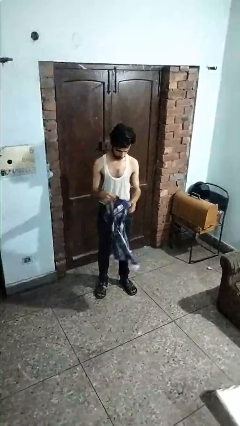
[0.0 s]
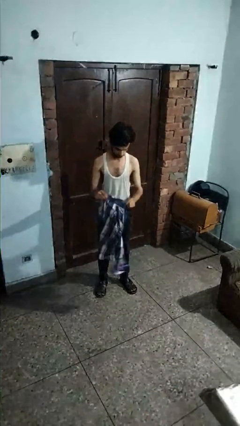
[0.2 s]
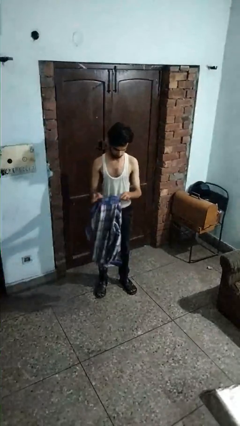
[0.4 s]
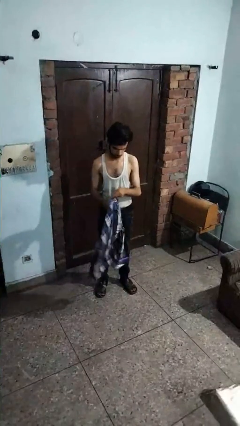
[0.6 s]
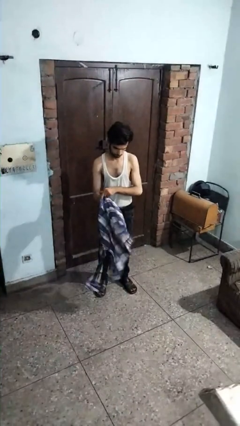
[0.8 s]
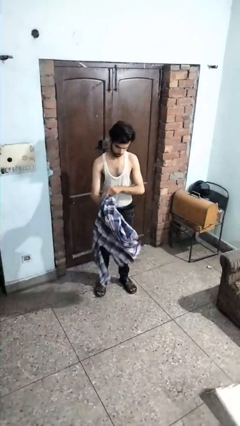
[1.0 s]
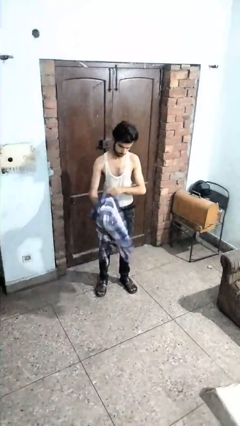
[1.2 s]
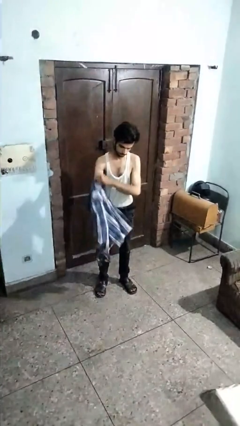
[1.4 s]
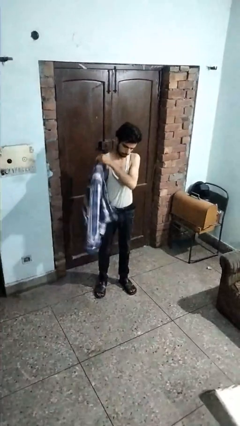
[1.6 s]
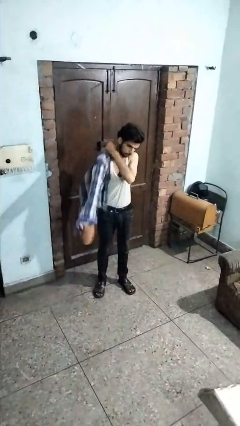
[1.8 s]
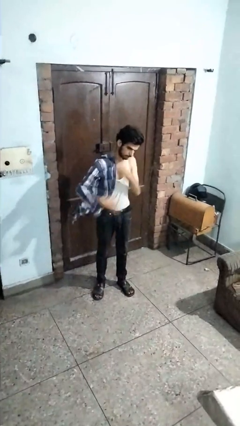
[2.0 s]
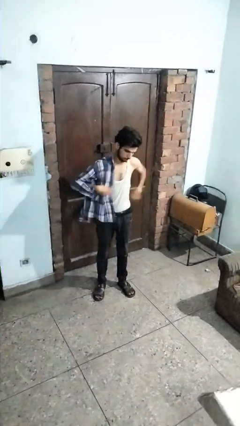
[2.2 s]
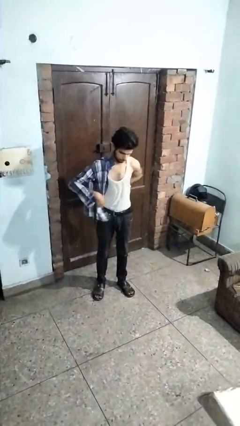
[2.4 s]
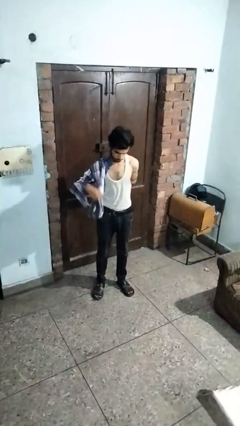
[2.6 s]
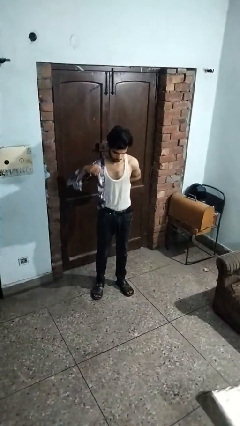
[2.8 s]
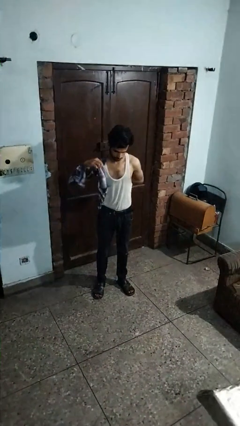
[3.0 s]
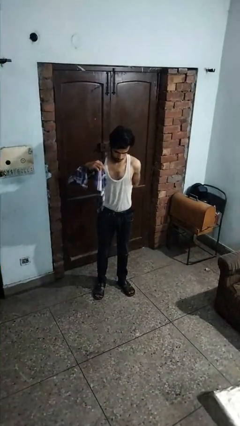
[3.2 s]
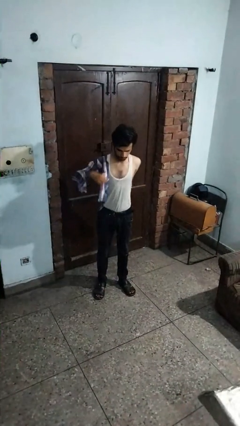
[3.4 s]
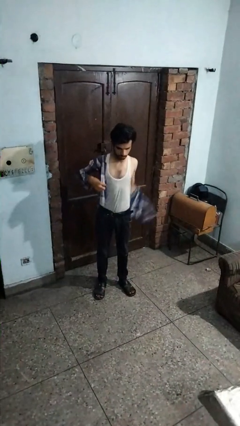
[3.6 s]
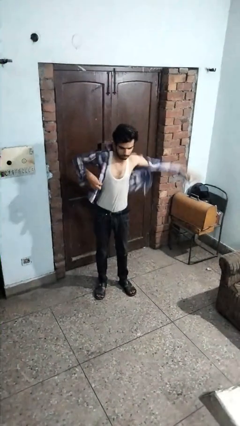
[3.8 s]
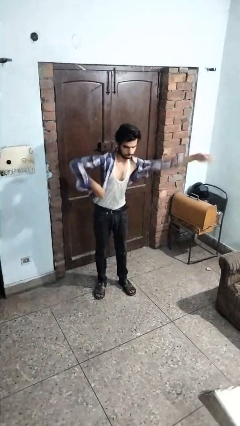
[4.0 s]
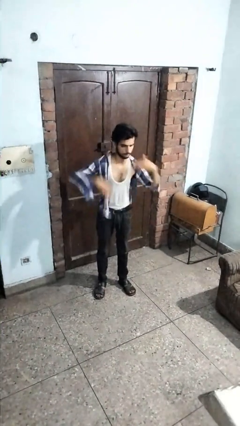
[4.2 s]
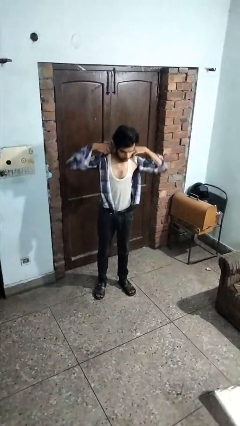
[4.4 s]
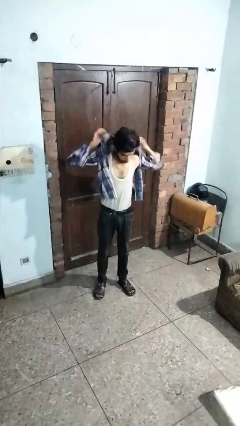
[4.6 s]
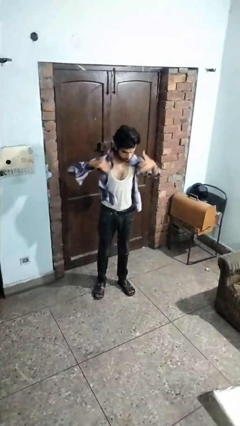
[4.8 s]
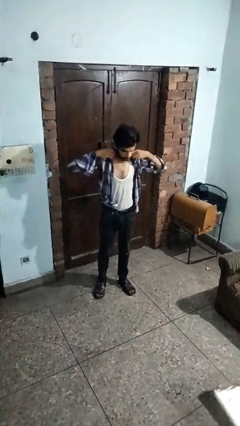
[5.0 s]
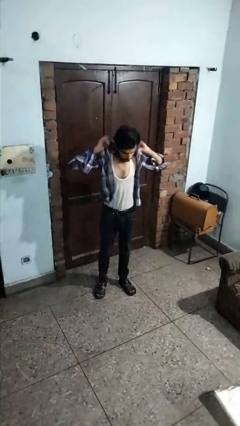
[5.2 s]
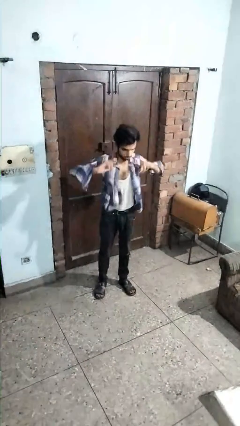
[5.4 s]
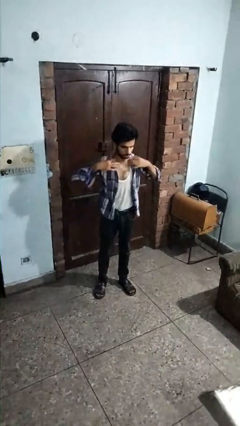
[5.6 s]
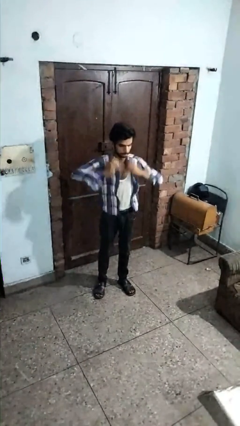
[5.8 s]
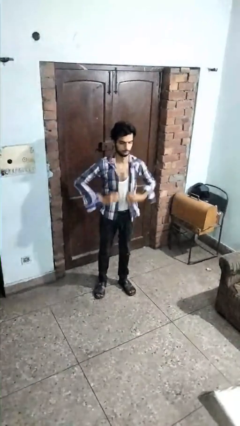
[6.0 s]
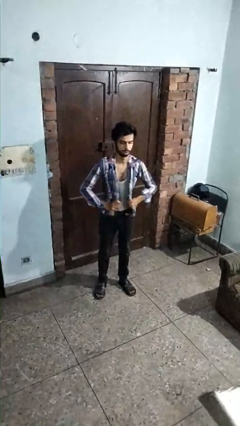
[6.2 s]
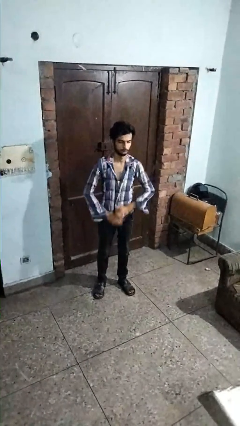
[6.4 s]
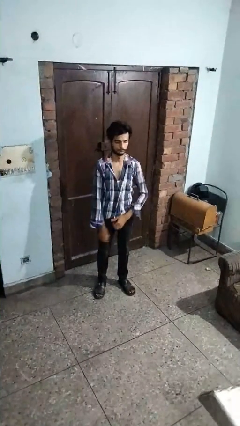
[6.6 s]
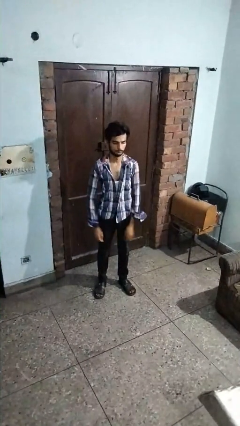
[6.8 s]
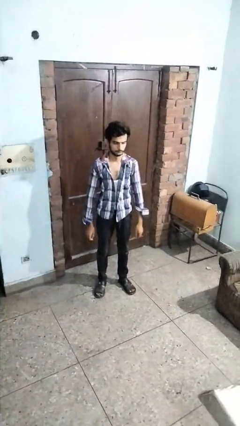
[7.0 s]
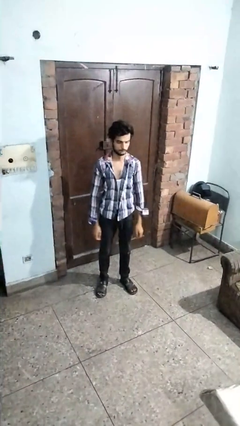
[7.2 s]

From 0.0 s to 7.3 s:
person puts on shirt

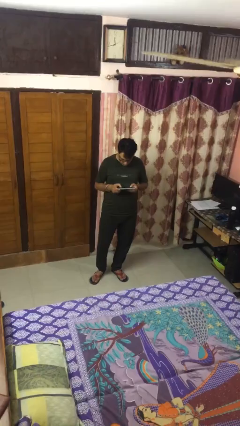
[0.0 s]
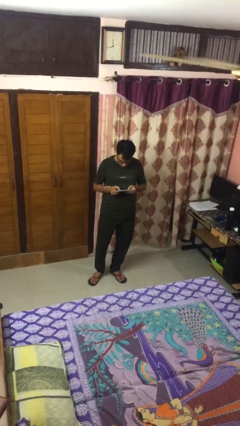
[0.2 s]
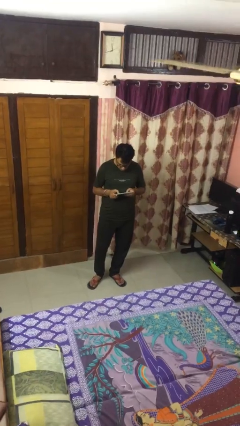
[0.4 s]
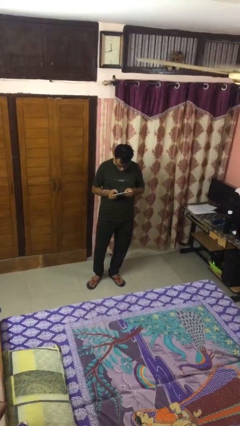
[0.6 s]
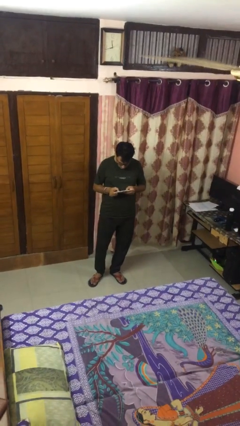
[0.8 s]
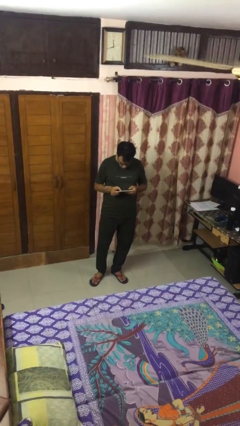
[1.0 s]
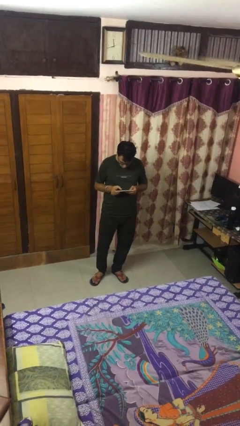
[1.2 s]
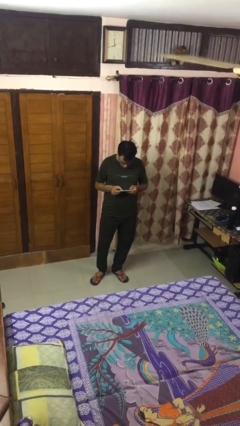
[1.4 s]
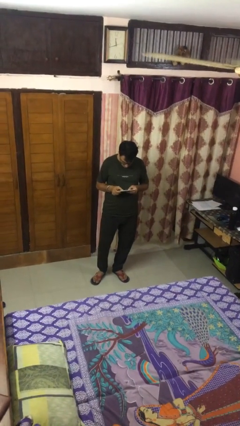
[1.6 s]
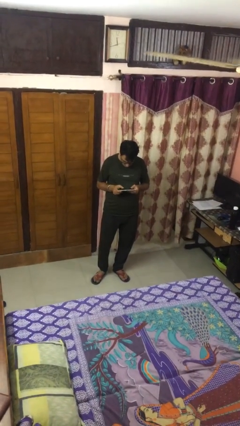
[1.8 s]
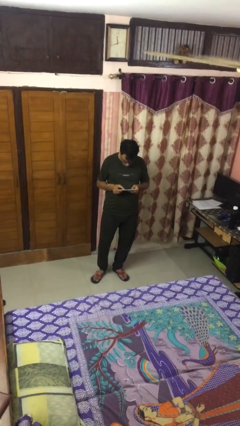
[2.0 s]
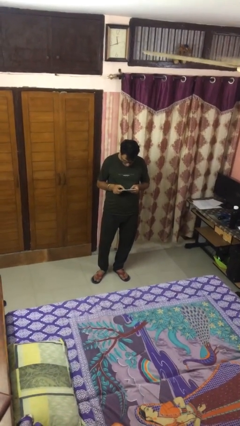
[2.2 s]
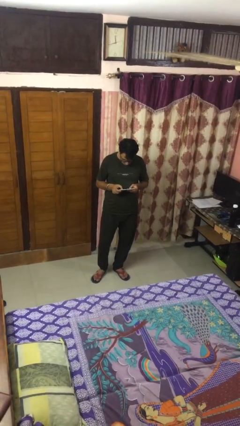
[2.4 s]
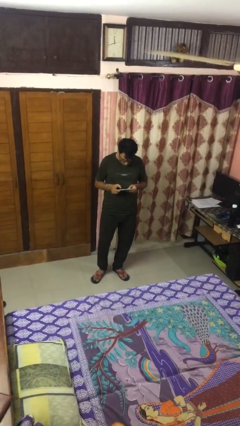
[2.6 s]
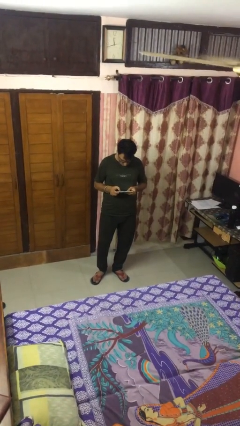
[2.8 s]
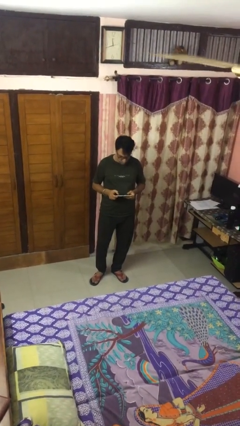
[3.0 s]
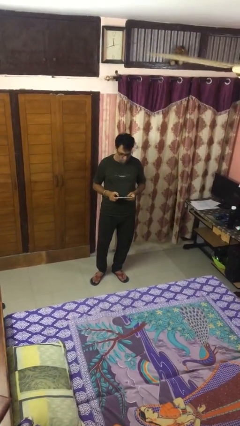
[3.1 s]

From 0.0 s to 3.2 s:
person interacts with handheld game

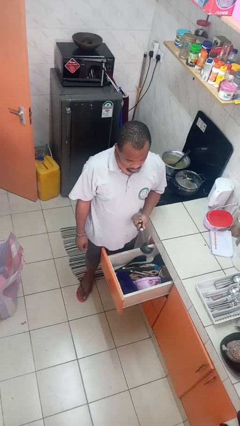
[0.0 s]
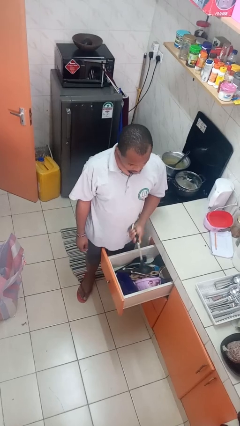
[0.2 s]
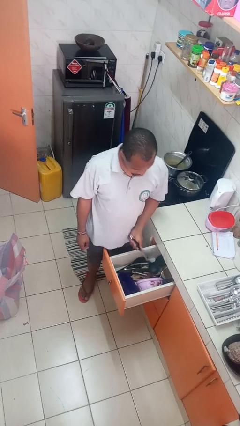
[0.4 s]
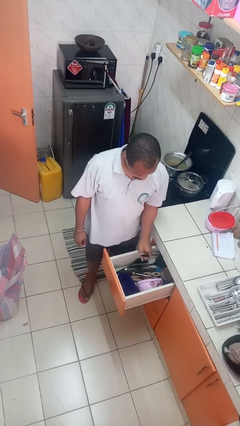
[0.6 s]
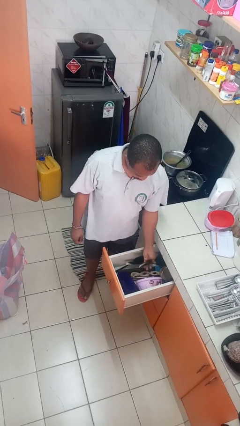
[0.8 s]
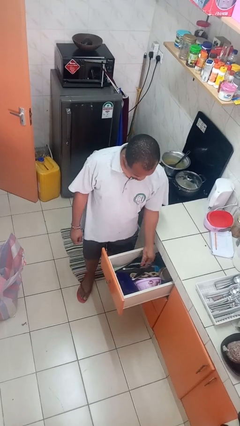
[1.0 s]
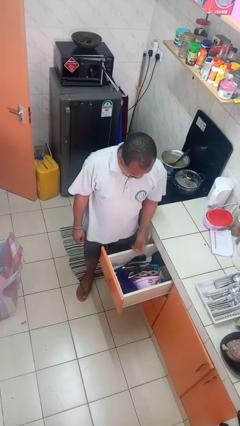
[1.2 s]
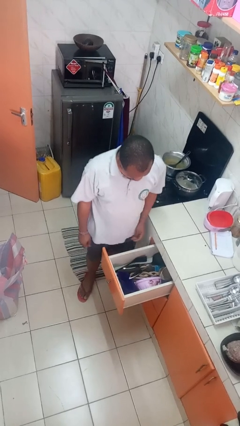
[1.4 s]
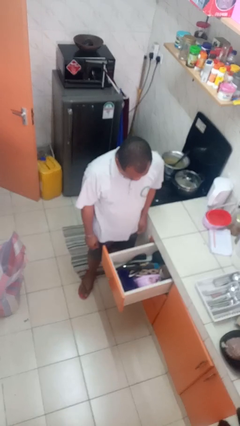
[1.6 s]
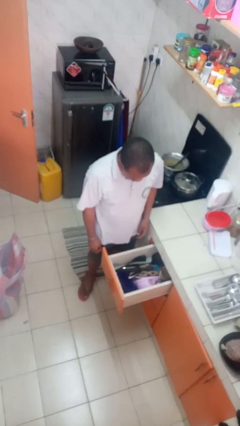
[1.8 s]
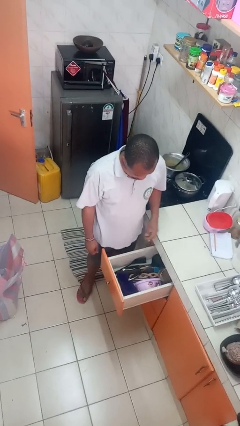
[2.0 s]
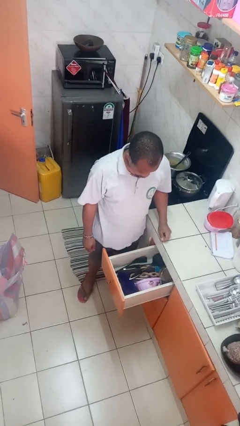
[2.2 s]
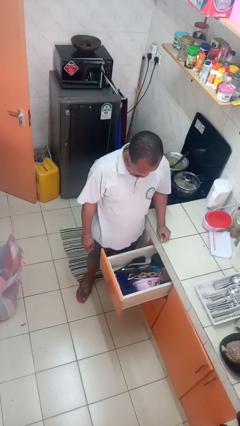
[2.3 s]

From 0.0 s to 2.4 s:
person puts object into kitchen drawer

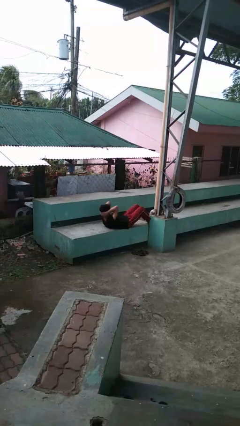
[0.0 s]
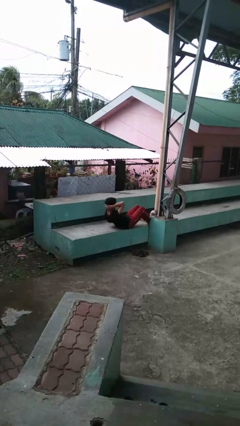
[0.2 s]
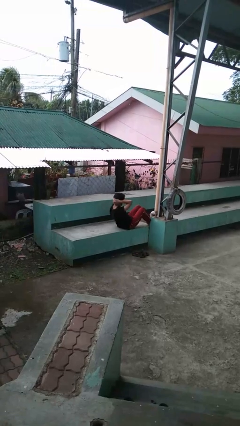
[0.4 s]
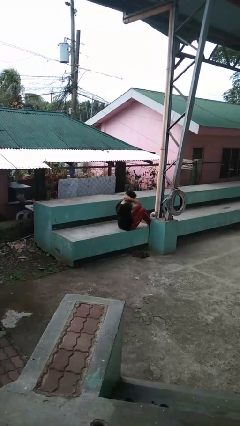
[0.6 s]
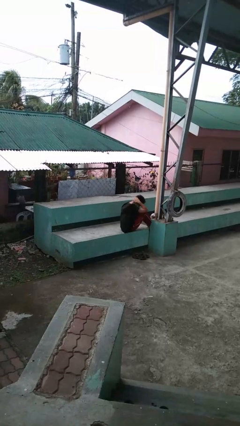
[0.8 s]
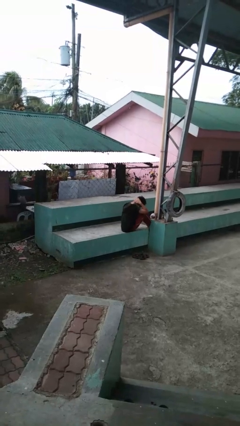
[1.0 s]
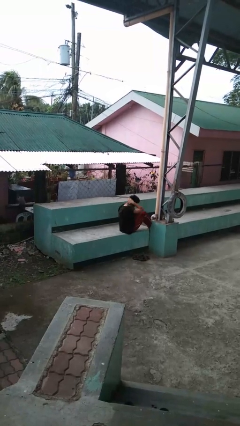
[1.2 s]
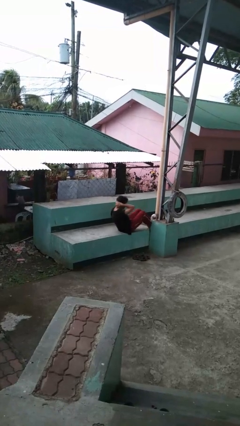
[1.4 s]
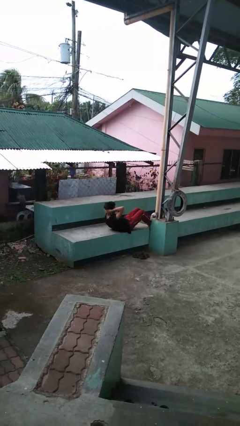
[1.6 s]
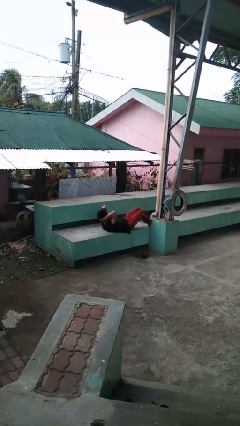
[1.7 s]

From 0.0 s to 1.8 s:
person exercises with situp

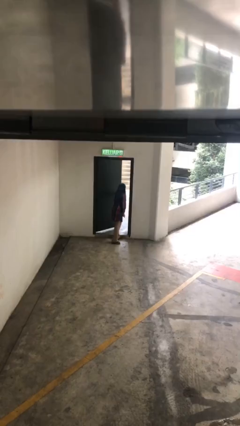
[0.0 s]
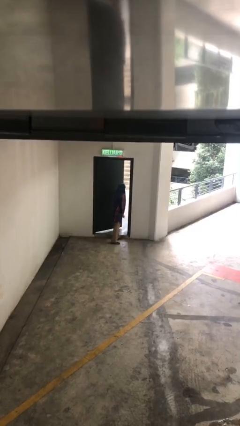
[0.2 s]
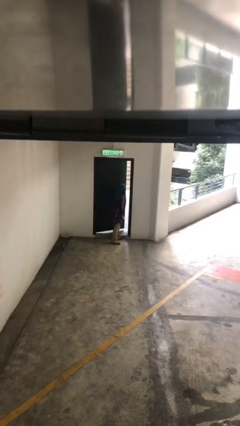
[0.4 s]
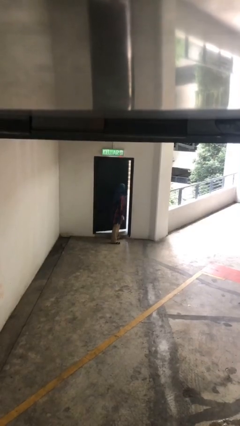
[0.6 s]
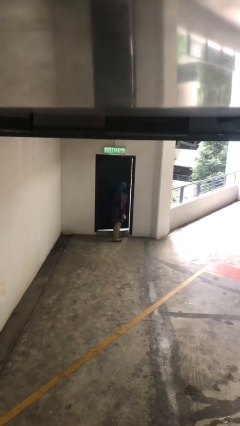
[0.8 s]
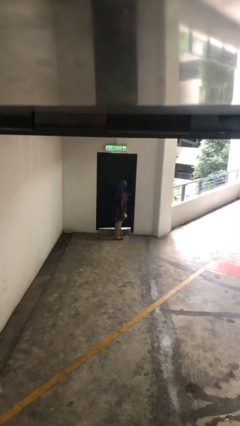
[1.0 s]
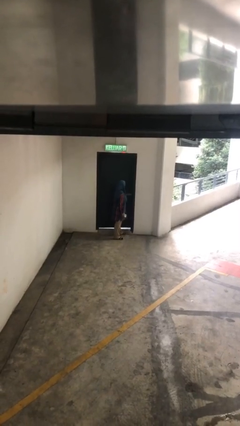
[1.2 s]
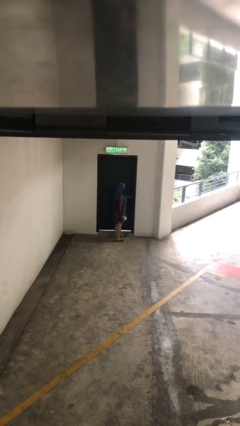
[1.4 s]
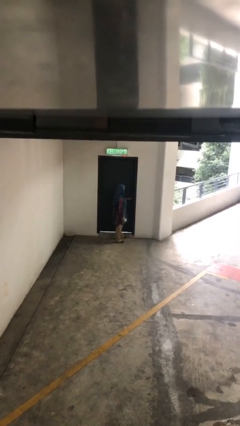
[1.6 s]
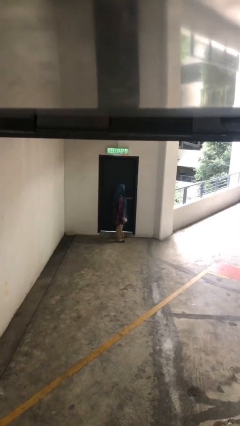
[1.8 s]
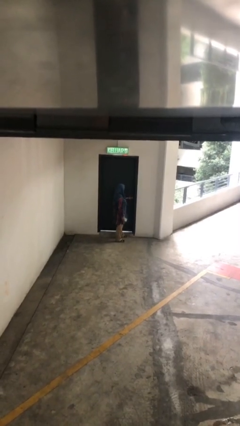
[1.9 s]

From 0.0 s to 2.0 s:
person closes facility door

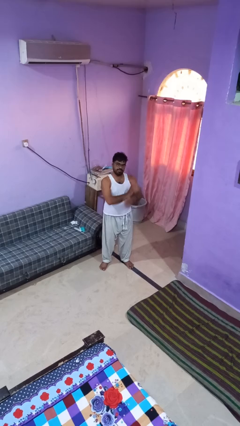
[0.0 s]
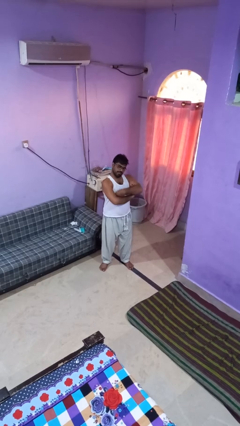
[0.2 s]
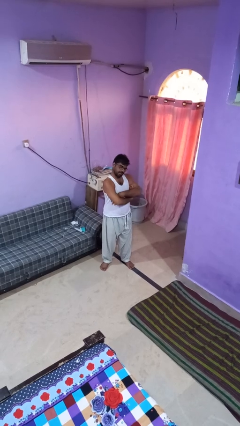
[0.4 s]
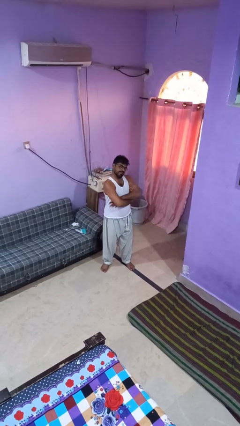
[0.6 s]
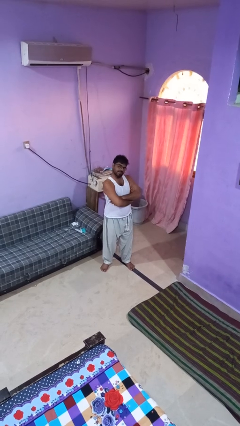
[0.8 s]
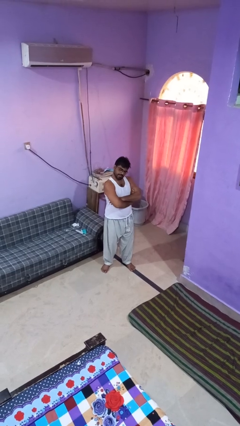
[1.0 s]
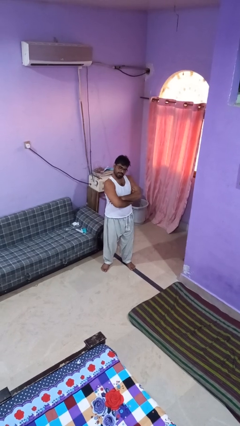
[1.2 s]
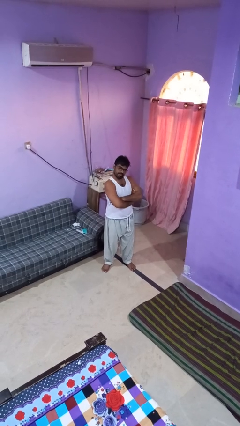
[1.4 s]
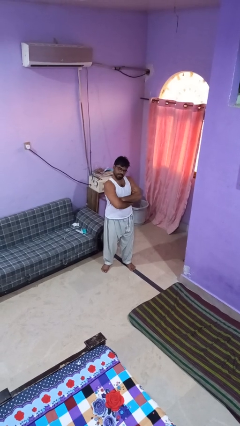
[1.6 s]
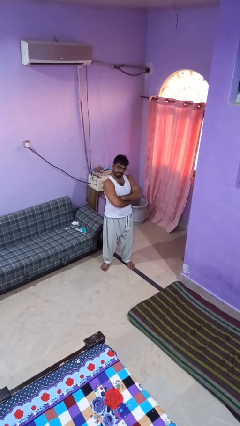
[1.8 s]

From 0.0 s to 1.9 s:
person crosses arms
